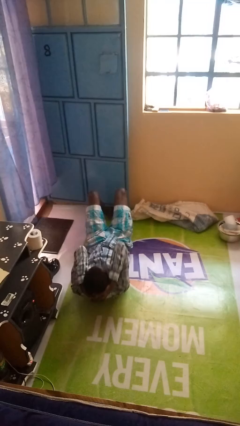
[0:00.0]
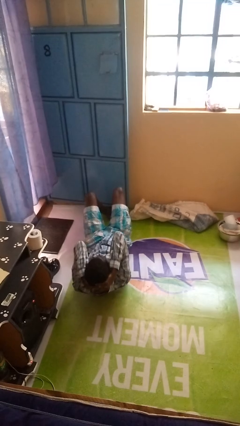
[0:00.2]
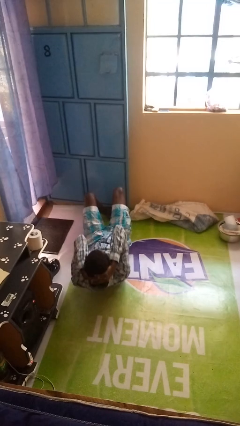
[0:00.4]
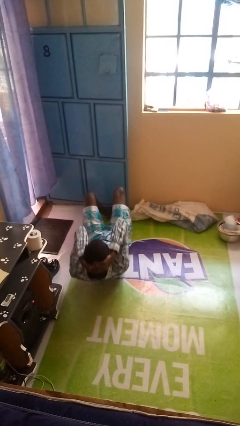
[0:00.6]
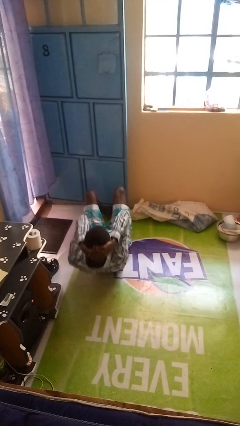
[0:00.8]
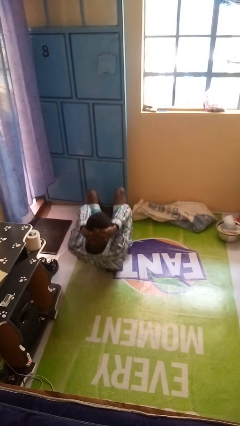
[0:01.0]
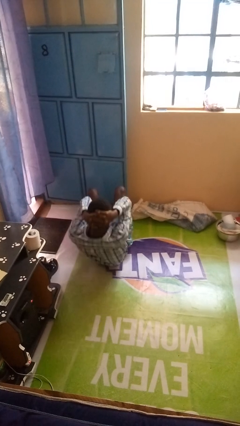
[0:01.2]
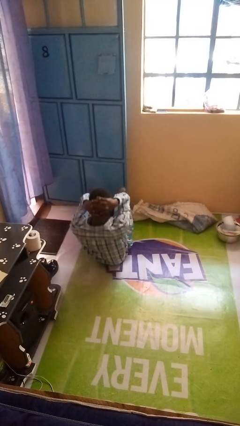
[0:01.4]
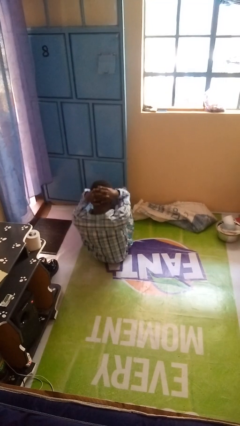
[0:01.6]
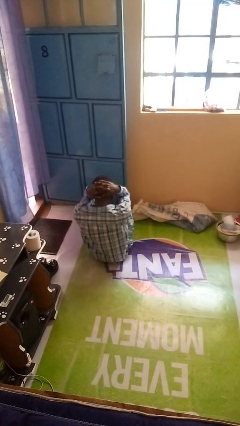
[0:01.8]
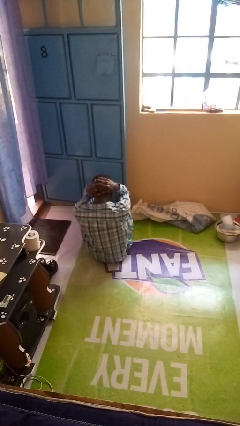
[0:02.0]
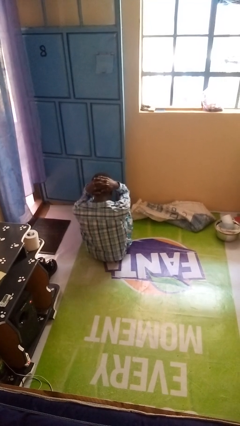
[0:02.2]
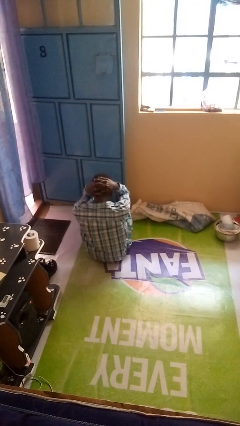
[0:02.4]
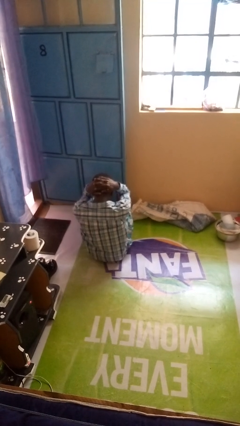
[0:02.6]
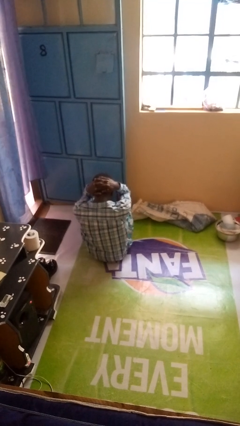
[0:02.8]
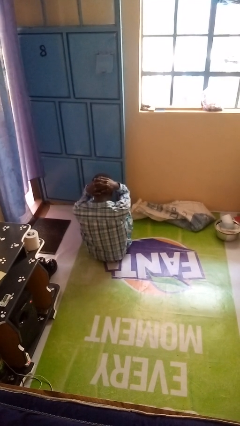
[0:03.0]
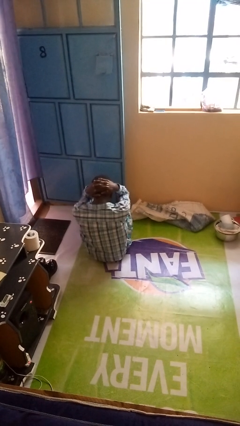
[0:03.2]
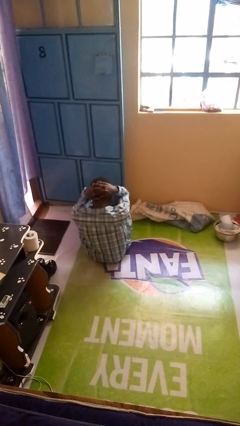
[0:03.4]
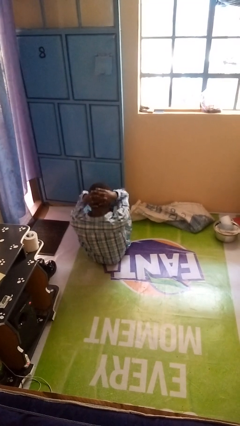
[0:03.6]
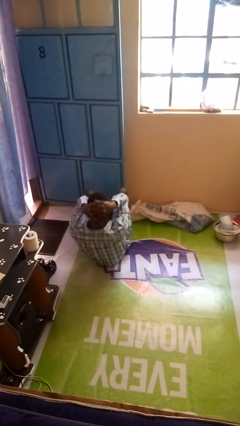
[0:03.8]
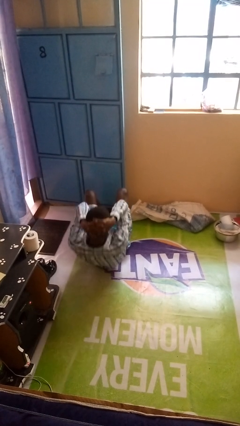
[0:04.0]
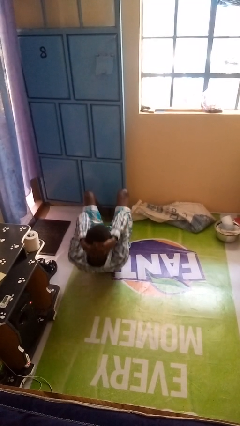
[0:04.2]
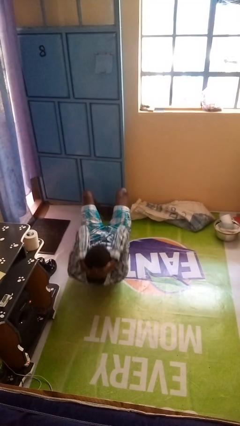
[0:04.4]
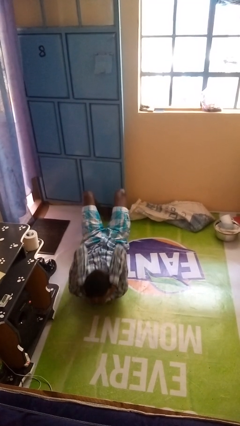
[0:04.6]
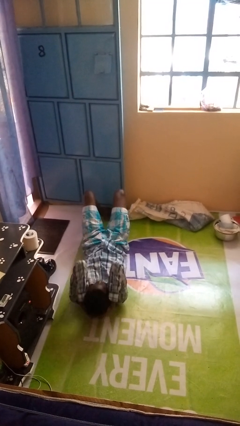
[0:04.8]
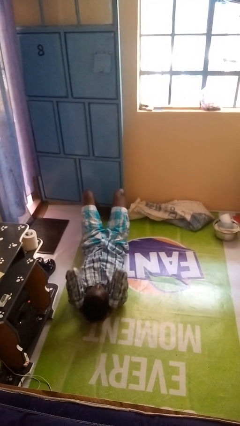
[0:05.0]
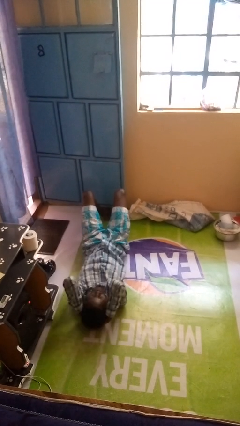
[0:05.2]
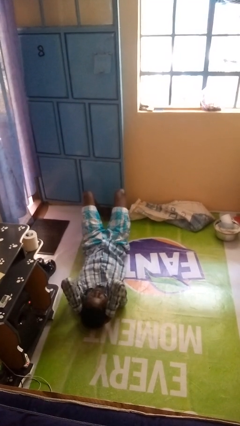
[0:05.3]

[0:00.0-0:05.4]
person exercises with situp

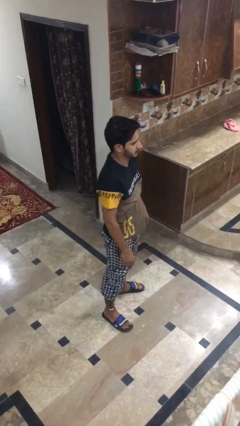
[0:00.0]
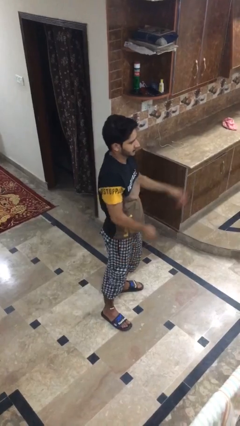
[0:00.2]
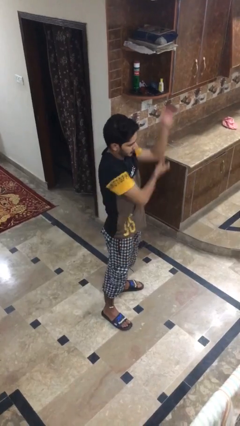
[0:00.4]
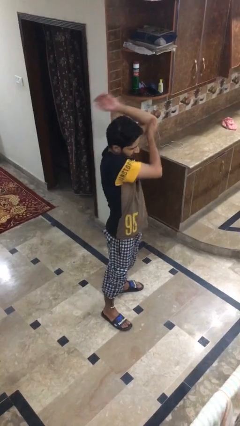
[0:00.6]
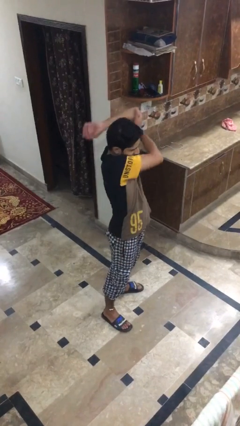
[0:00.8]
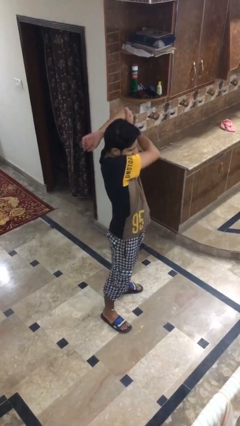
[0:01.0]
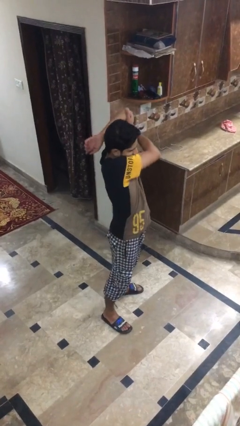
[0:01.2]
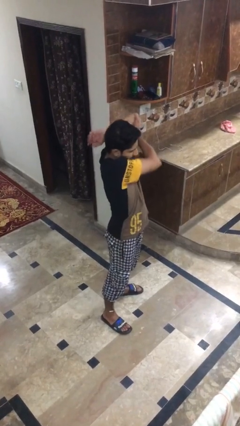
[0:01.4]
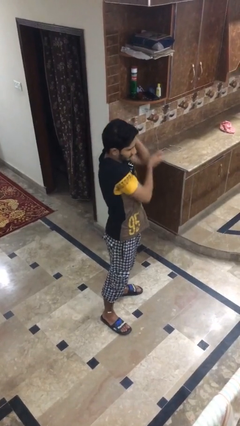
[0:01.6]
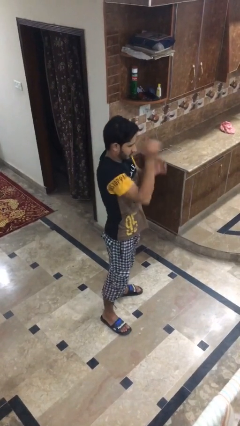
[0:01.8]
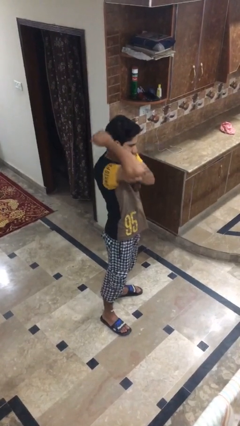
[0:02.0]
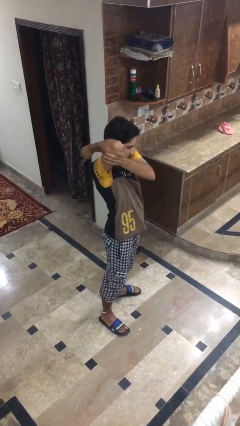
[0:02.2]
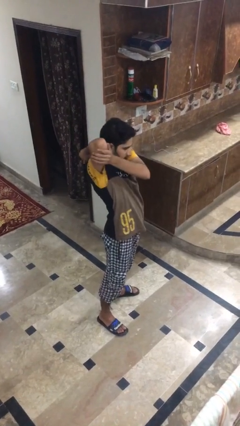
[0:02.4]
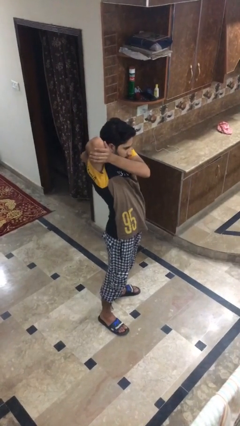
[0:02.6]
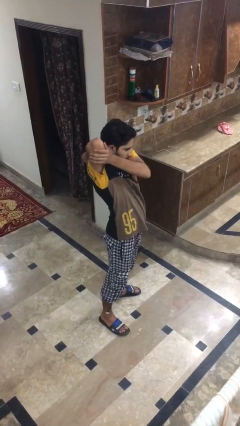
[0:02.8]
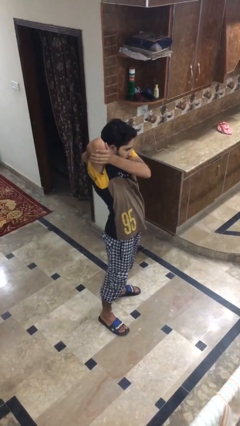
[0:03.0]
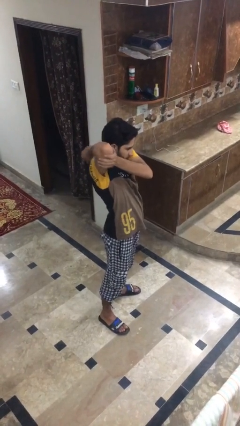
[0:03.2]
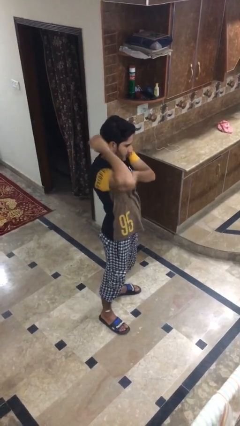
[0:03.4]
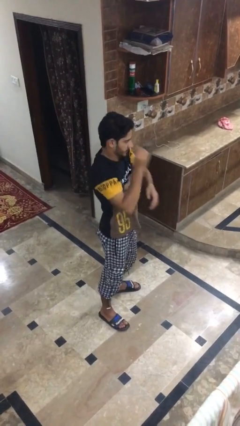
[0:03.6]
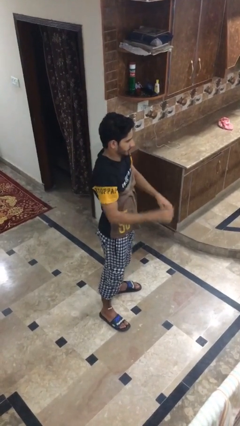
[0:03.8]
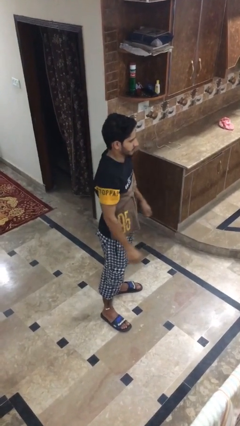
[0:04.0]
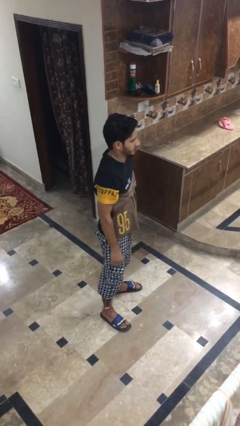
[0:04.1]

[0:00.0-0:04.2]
person stretches arms to side

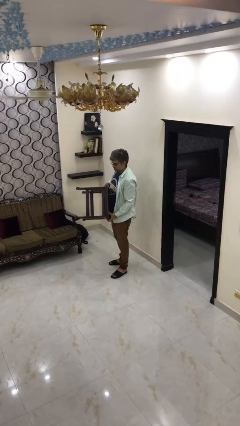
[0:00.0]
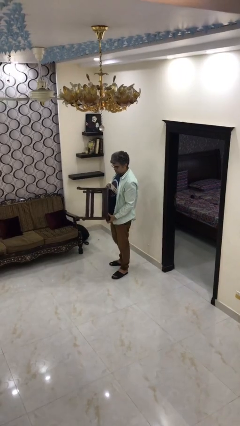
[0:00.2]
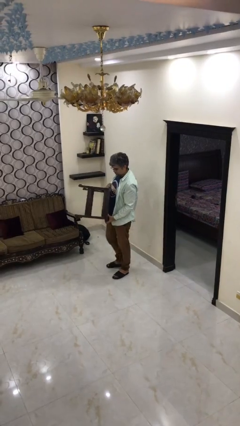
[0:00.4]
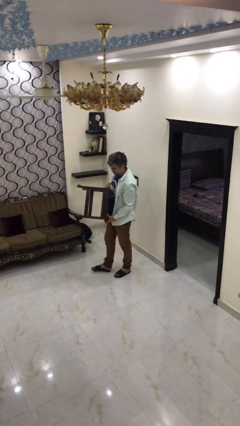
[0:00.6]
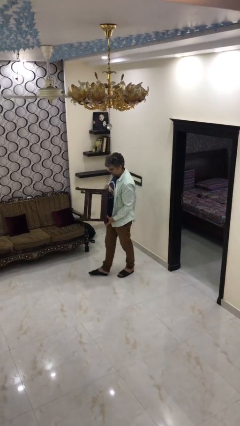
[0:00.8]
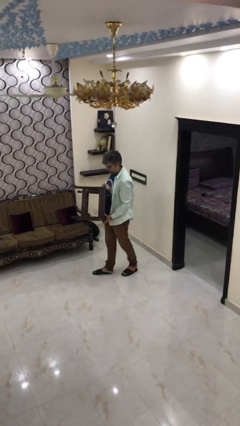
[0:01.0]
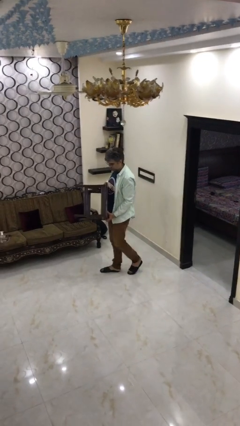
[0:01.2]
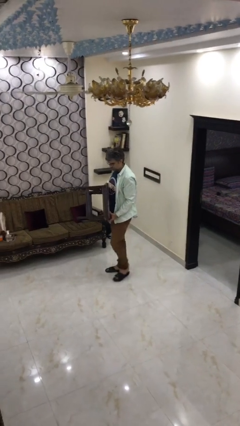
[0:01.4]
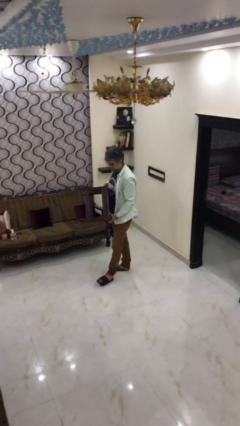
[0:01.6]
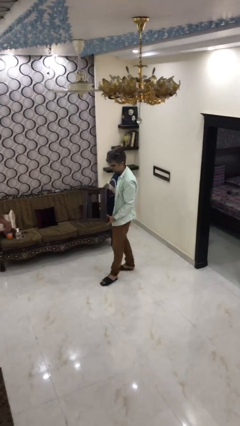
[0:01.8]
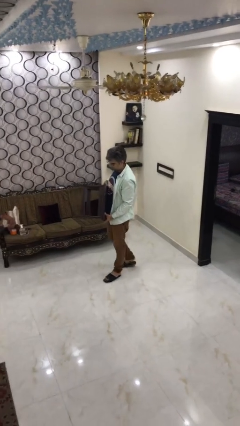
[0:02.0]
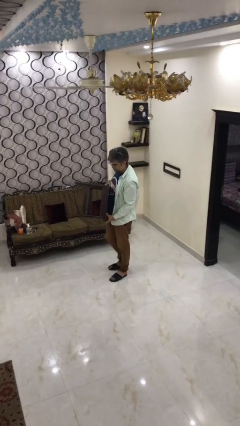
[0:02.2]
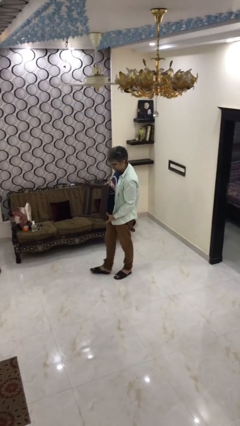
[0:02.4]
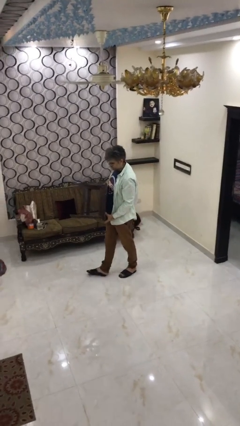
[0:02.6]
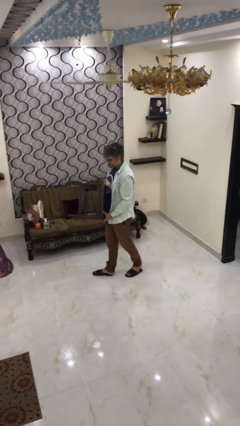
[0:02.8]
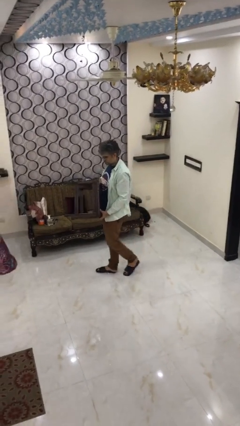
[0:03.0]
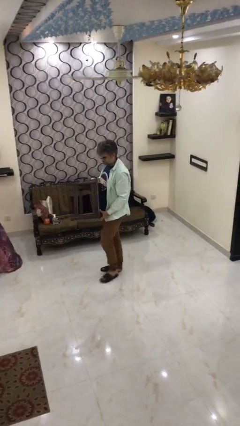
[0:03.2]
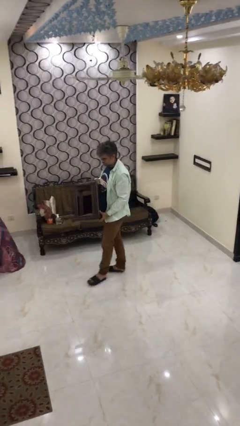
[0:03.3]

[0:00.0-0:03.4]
person carries heavy object

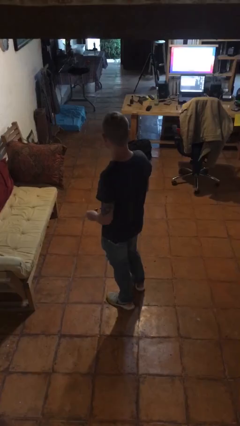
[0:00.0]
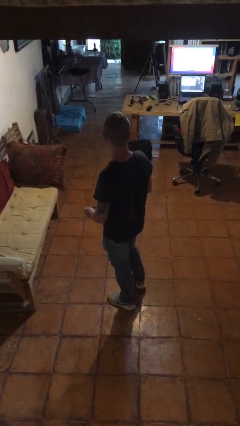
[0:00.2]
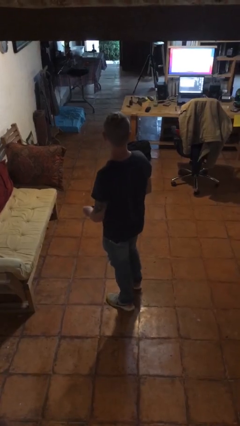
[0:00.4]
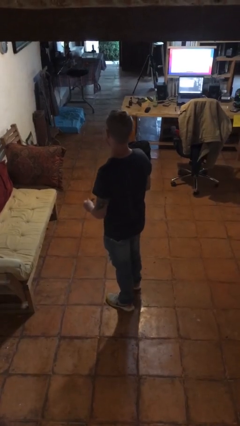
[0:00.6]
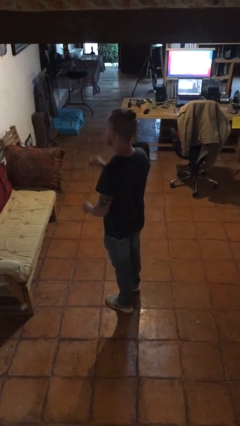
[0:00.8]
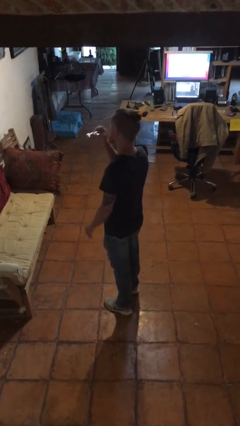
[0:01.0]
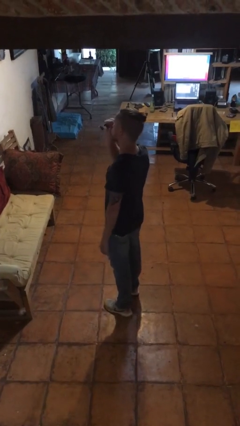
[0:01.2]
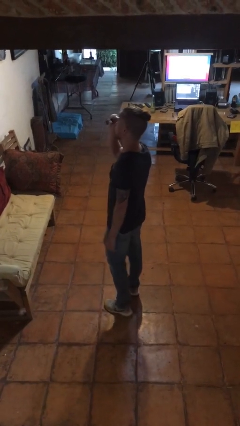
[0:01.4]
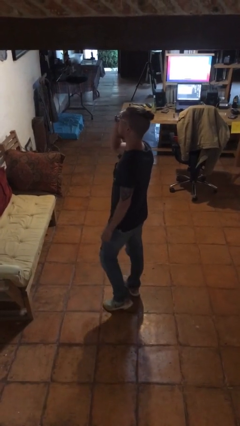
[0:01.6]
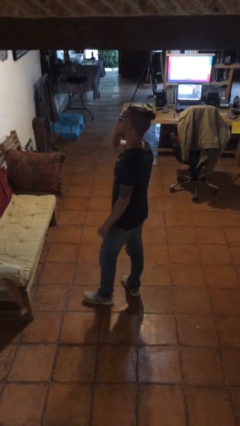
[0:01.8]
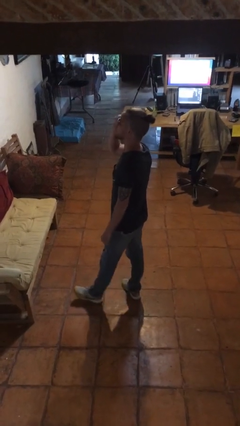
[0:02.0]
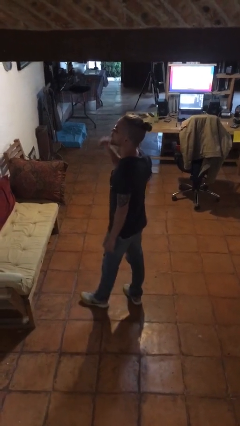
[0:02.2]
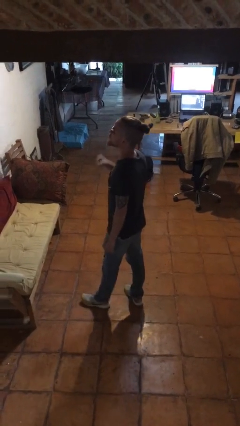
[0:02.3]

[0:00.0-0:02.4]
person puts on sunglasses

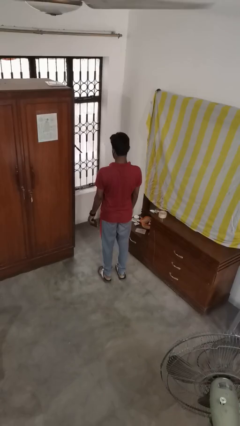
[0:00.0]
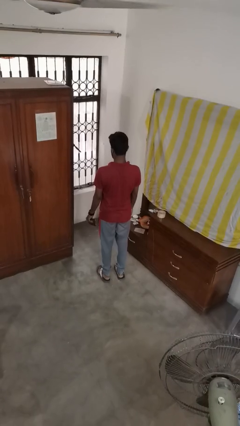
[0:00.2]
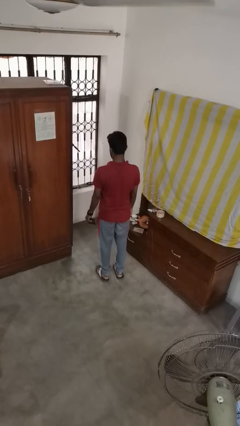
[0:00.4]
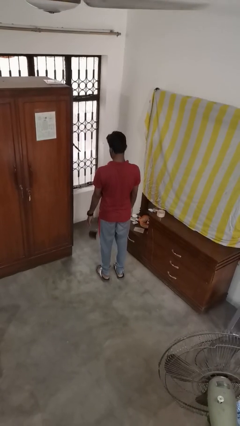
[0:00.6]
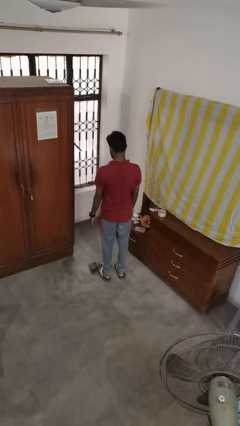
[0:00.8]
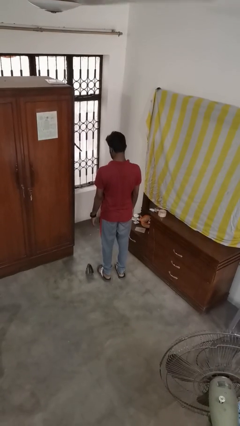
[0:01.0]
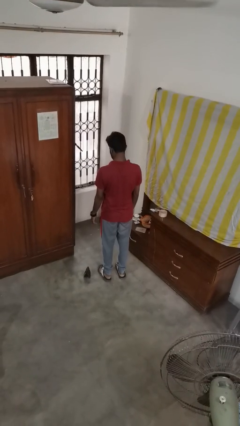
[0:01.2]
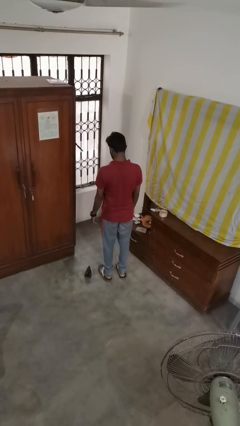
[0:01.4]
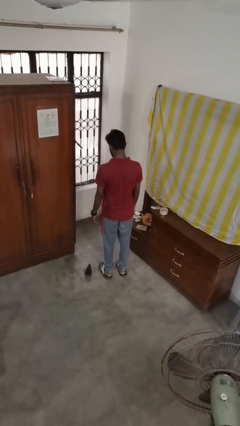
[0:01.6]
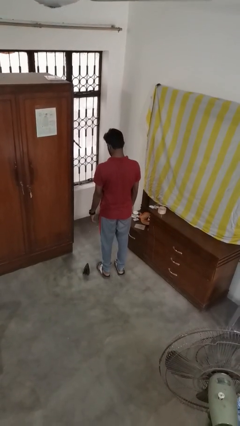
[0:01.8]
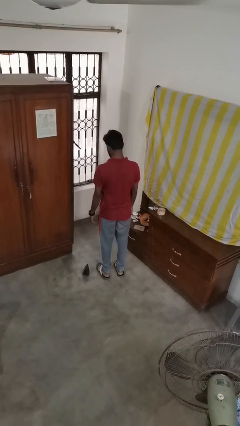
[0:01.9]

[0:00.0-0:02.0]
person throws object to ground
